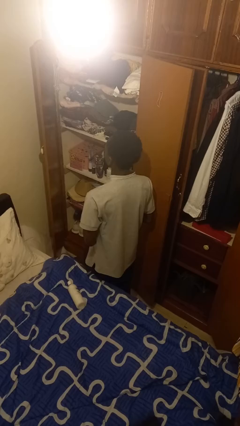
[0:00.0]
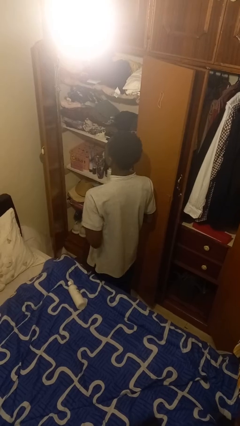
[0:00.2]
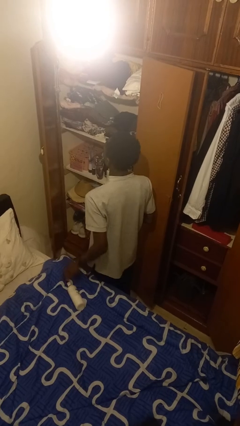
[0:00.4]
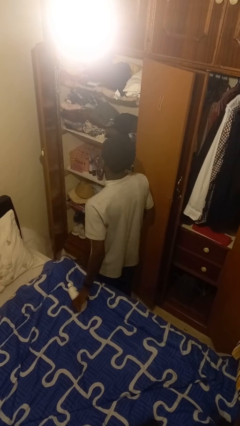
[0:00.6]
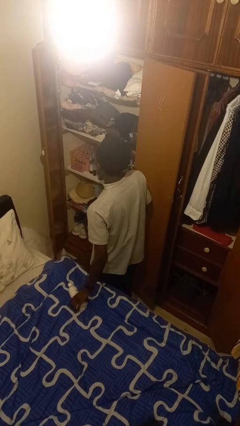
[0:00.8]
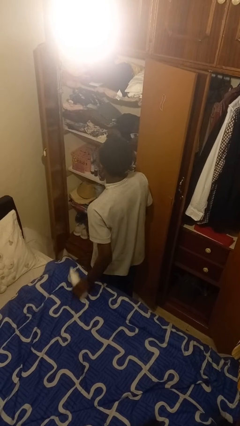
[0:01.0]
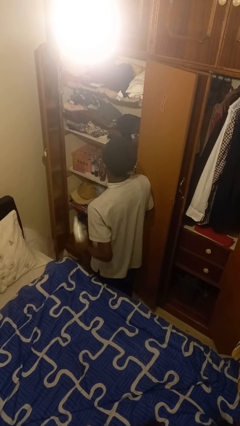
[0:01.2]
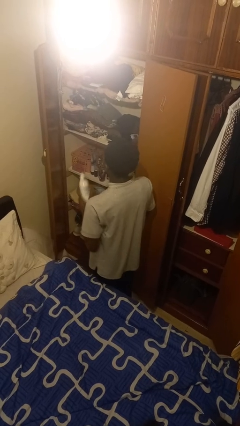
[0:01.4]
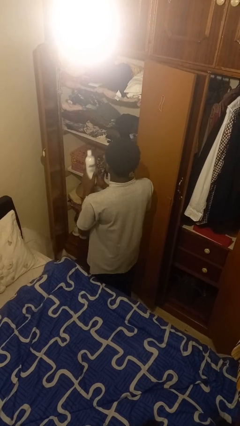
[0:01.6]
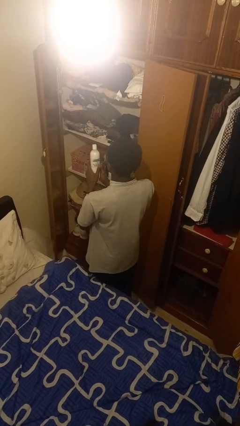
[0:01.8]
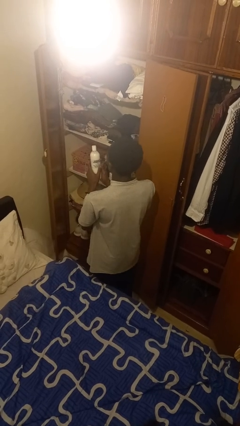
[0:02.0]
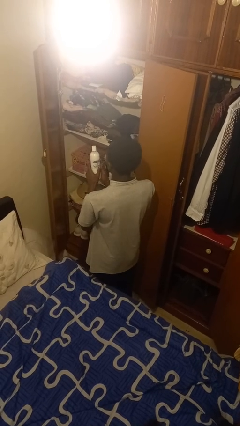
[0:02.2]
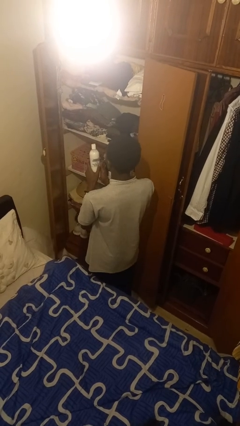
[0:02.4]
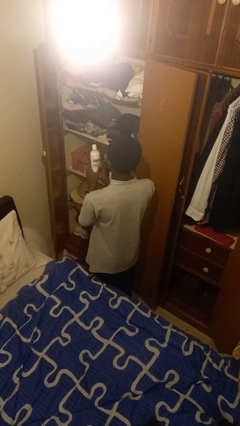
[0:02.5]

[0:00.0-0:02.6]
person picks up object from bed

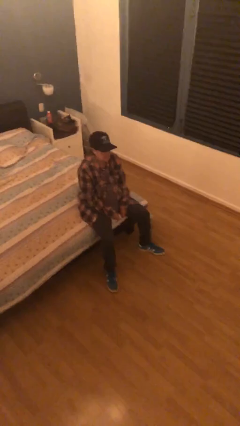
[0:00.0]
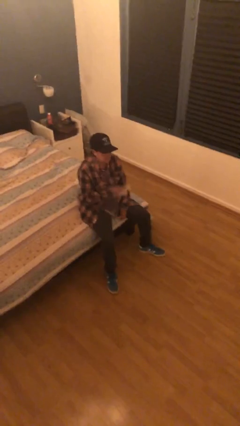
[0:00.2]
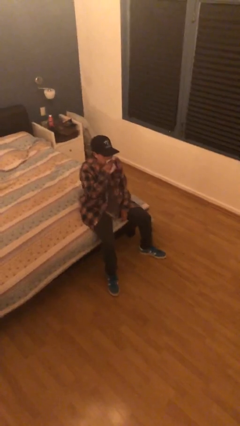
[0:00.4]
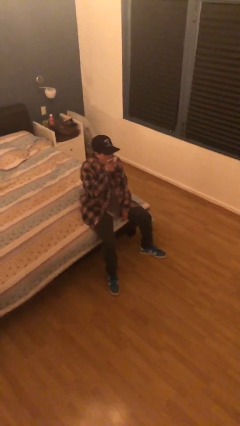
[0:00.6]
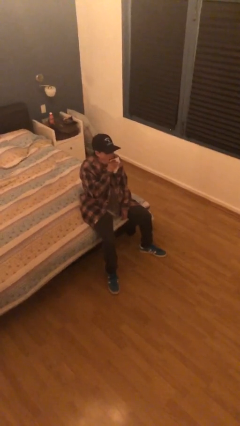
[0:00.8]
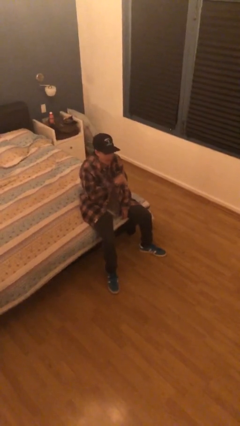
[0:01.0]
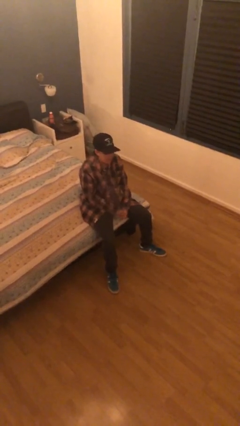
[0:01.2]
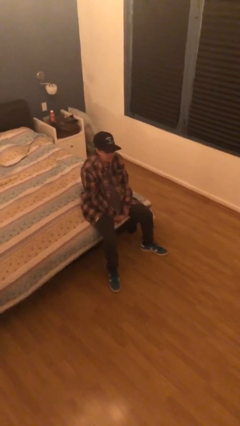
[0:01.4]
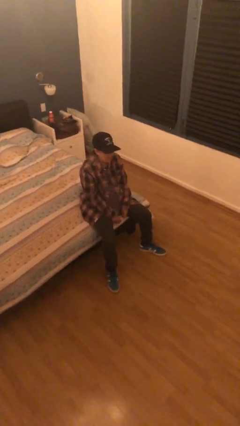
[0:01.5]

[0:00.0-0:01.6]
person wipes mouth with napkin

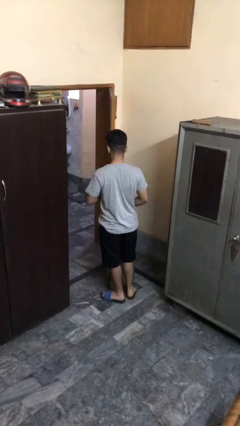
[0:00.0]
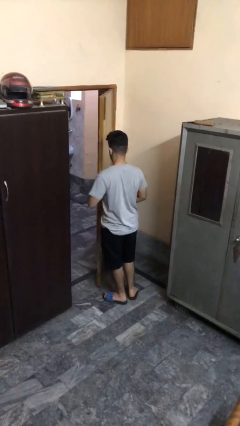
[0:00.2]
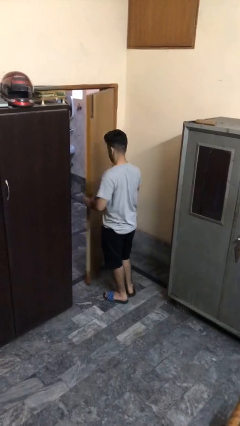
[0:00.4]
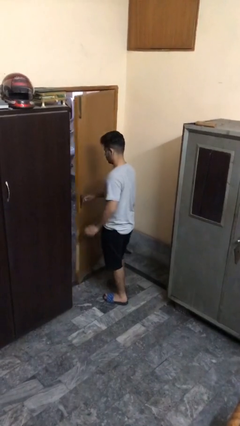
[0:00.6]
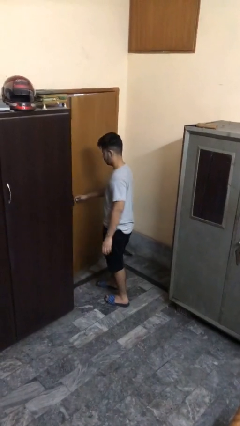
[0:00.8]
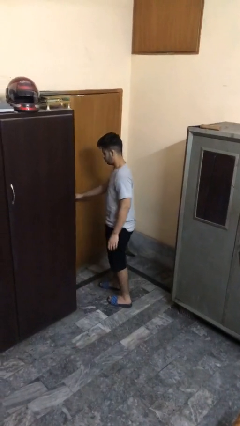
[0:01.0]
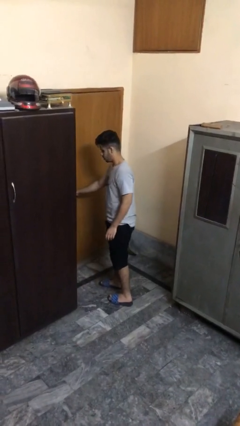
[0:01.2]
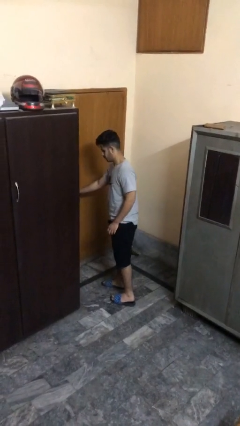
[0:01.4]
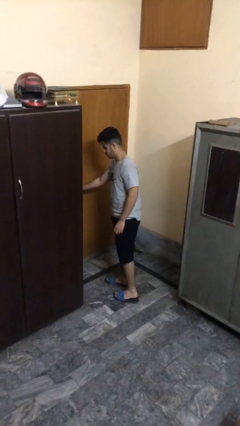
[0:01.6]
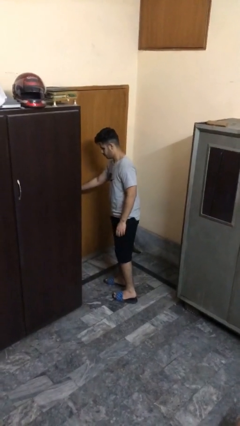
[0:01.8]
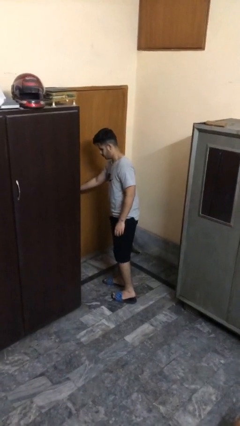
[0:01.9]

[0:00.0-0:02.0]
person closes facility door

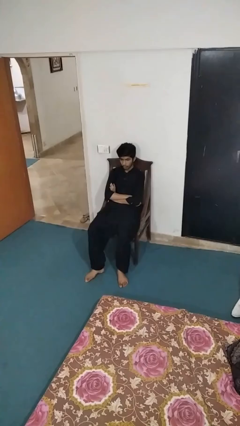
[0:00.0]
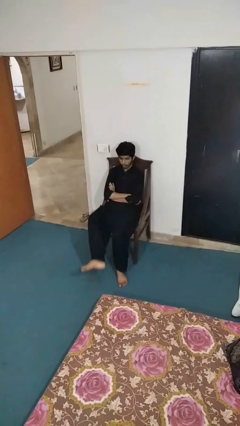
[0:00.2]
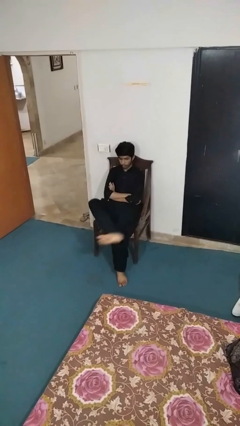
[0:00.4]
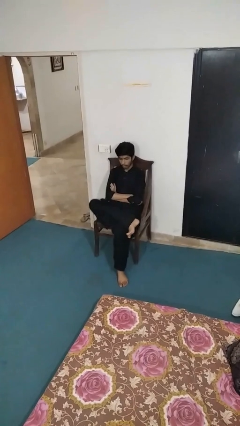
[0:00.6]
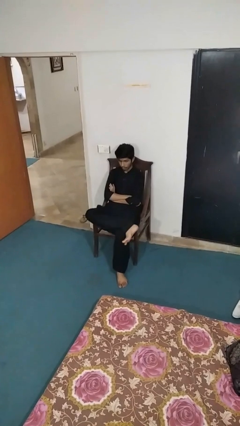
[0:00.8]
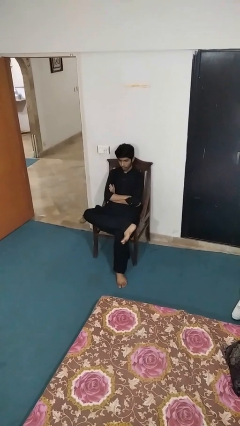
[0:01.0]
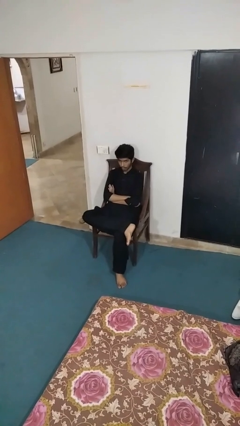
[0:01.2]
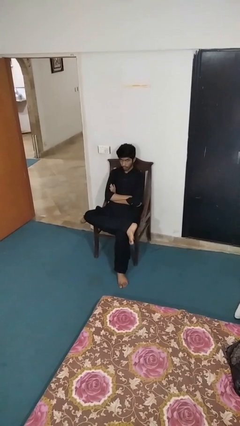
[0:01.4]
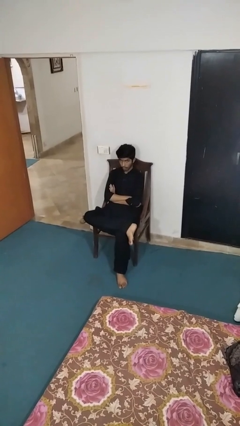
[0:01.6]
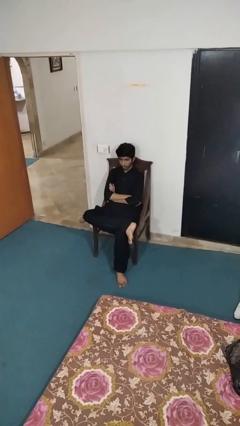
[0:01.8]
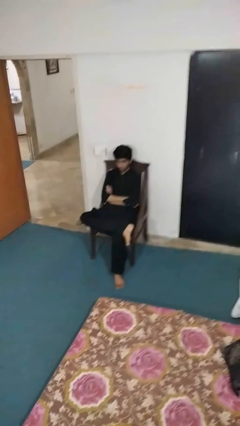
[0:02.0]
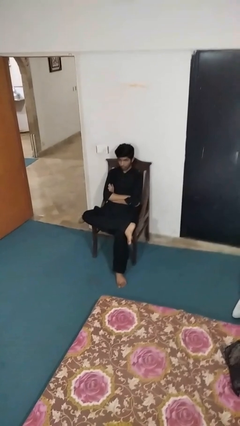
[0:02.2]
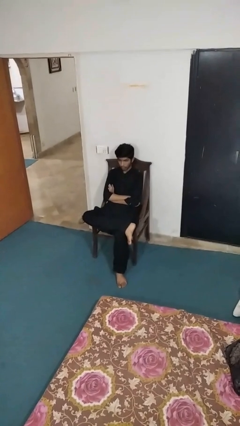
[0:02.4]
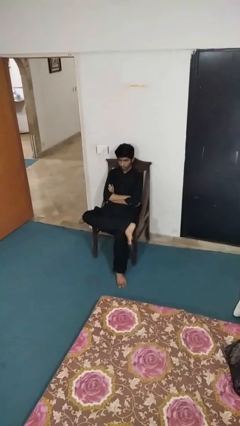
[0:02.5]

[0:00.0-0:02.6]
person crosses legs

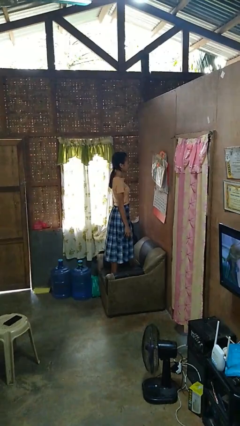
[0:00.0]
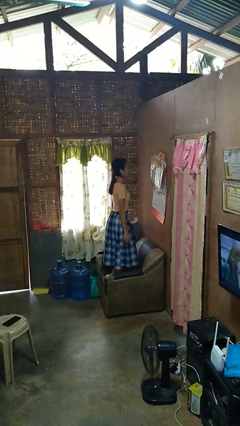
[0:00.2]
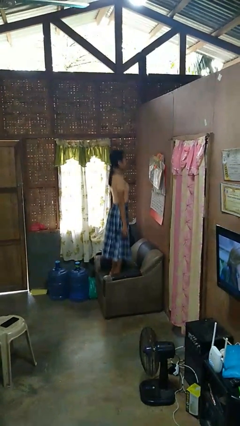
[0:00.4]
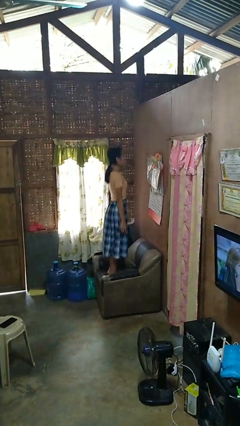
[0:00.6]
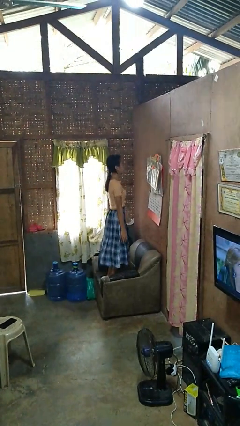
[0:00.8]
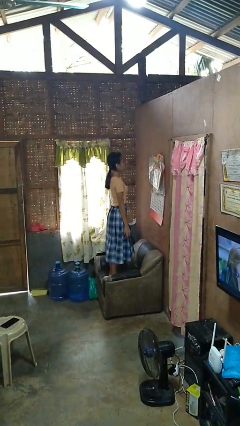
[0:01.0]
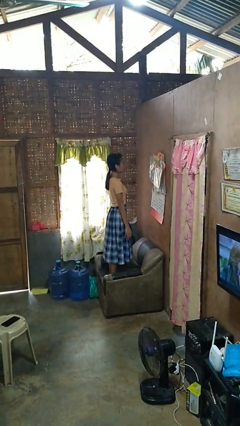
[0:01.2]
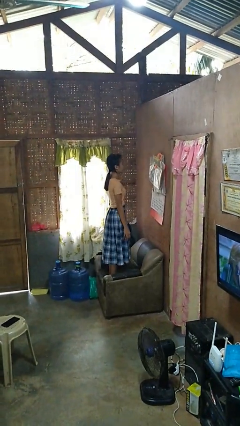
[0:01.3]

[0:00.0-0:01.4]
person jumps on couch

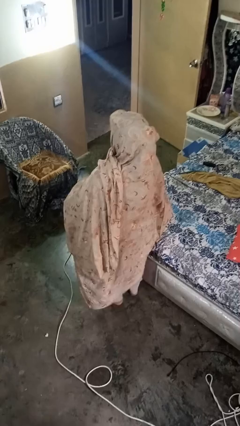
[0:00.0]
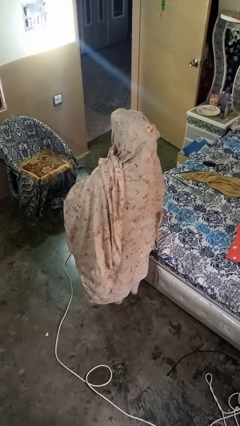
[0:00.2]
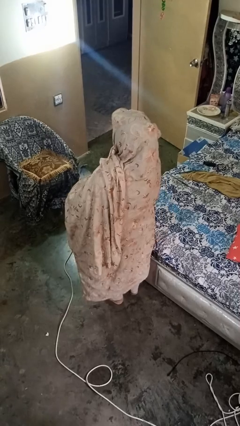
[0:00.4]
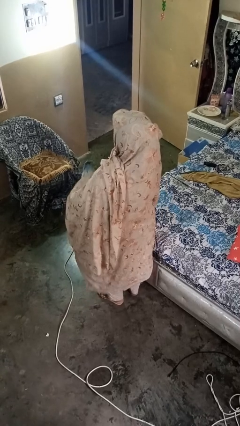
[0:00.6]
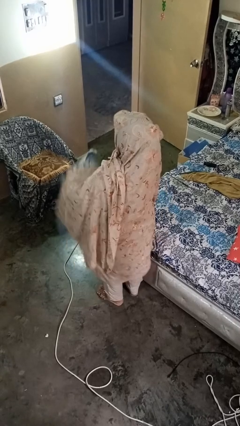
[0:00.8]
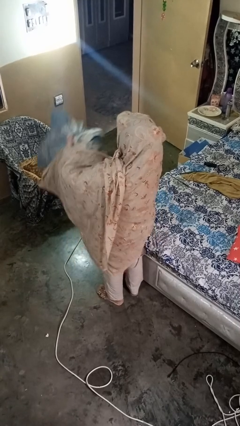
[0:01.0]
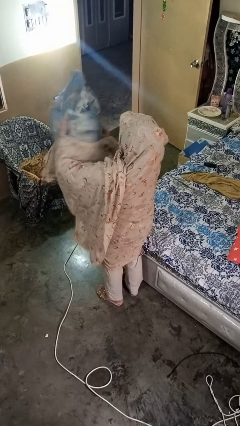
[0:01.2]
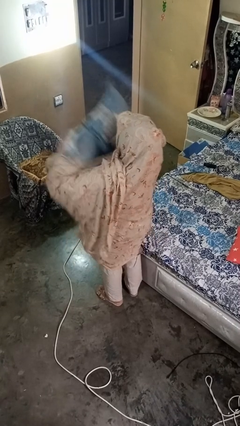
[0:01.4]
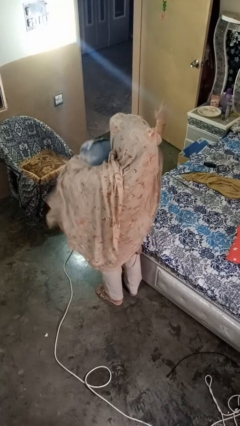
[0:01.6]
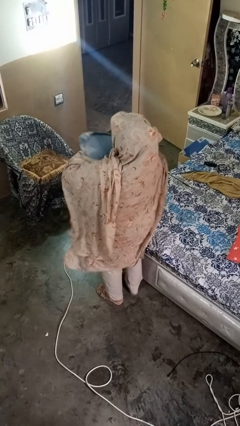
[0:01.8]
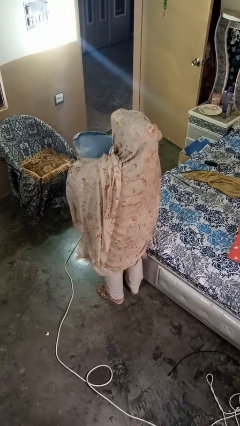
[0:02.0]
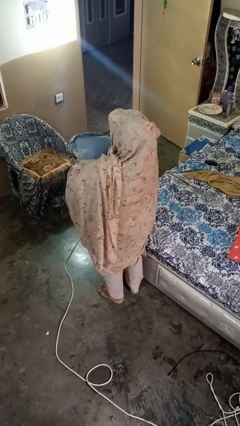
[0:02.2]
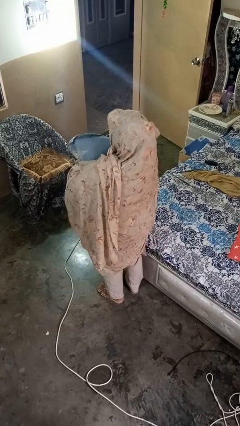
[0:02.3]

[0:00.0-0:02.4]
person squeezes object

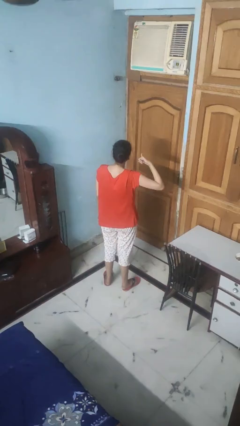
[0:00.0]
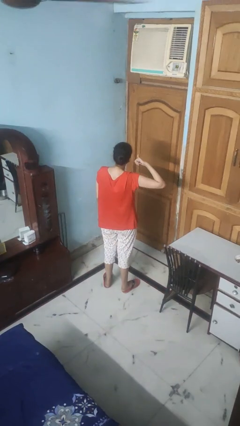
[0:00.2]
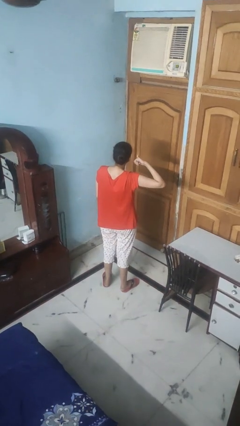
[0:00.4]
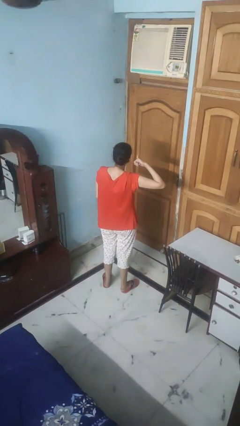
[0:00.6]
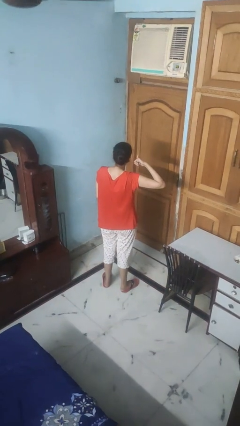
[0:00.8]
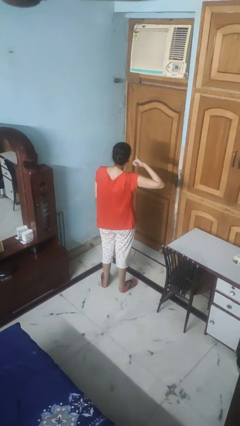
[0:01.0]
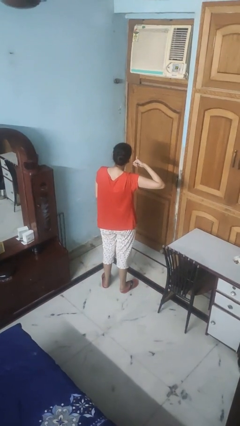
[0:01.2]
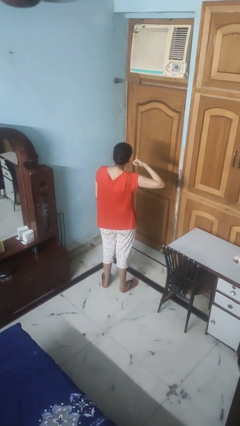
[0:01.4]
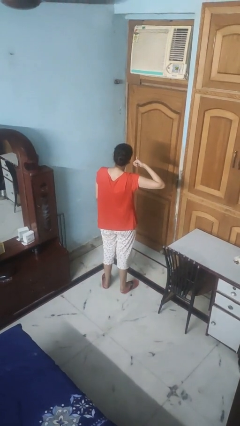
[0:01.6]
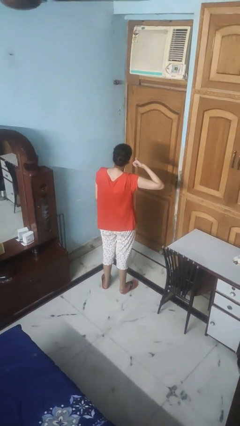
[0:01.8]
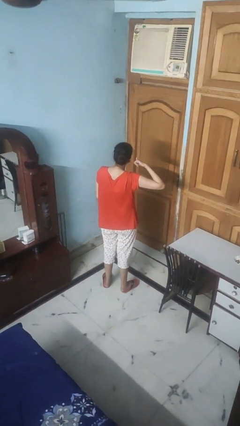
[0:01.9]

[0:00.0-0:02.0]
person gestures call me

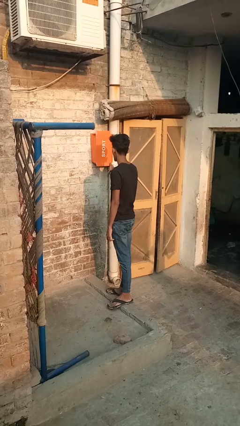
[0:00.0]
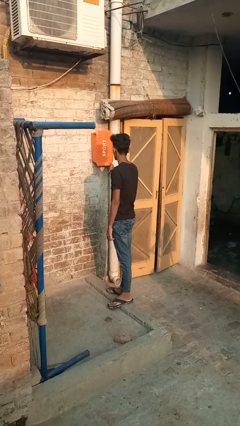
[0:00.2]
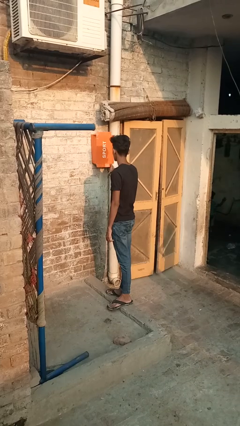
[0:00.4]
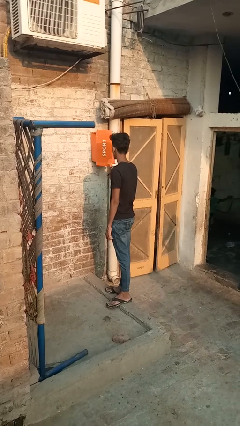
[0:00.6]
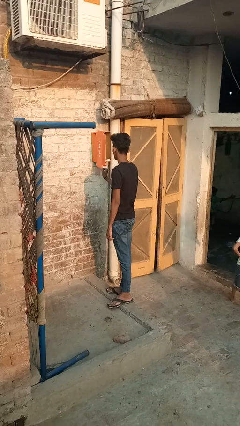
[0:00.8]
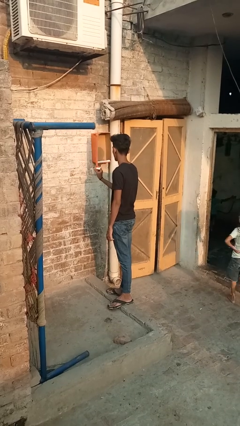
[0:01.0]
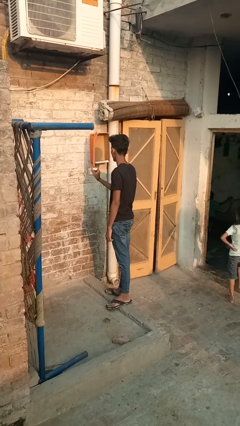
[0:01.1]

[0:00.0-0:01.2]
person closes mailbox

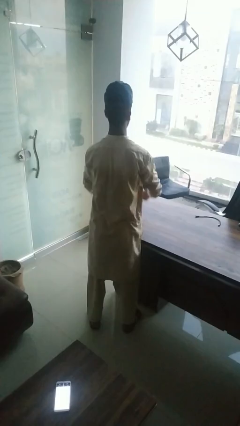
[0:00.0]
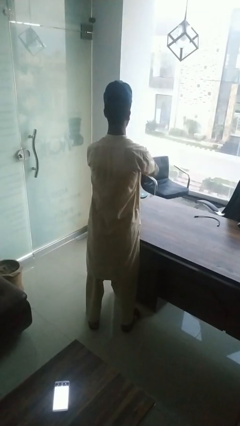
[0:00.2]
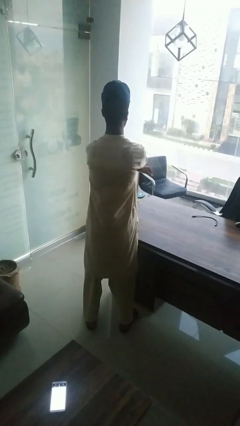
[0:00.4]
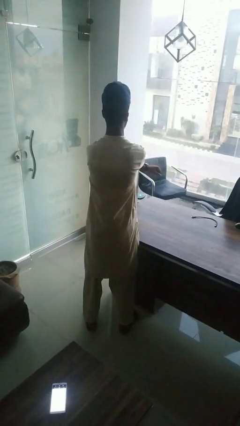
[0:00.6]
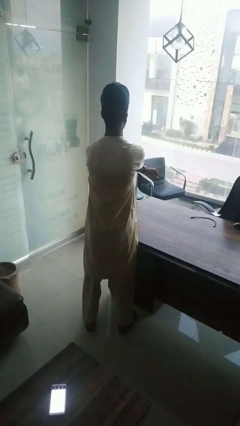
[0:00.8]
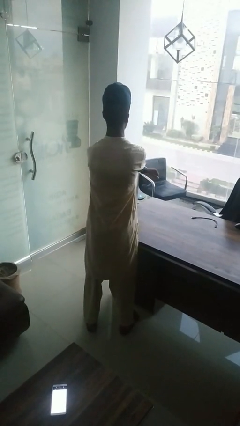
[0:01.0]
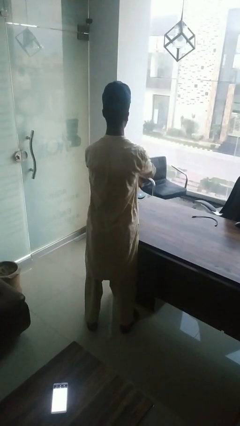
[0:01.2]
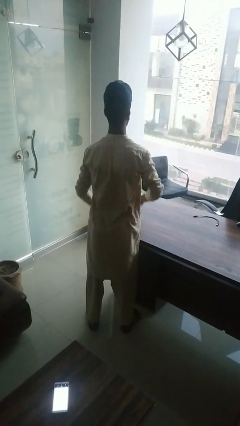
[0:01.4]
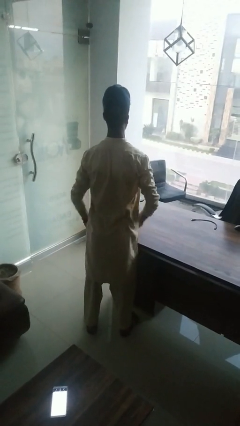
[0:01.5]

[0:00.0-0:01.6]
person gestures arms x
